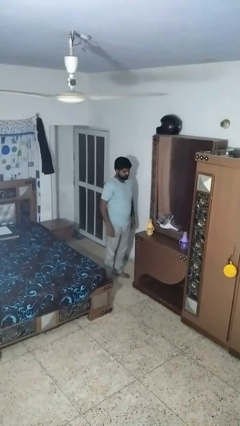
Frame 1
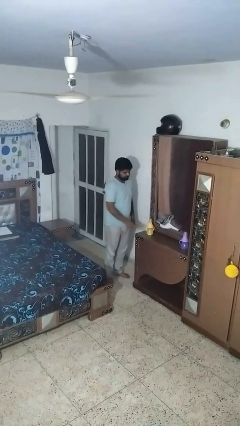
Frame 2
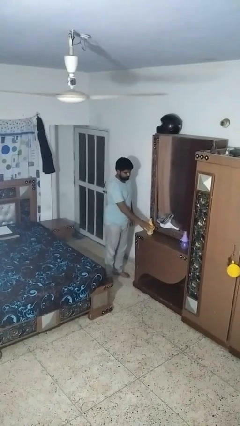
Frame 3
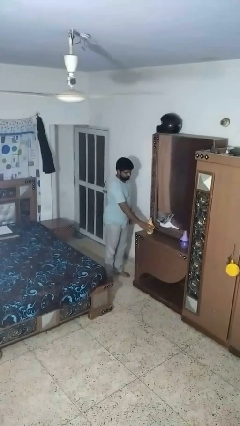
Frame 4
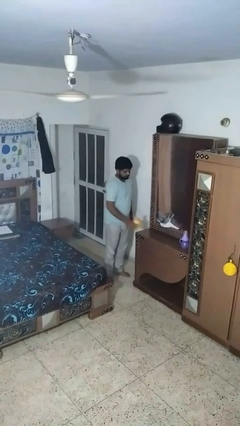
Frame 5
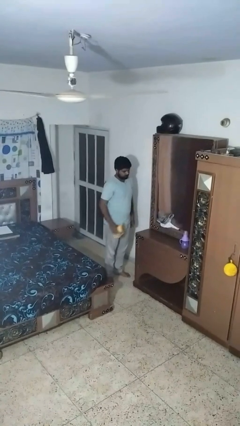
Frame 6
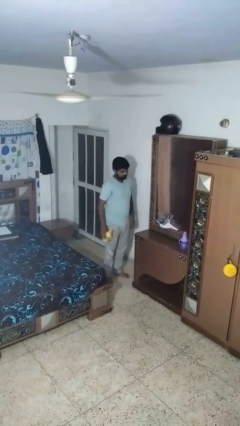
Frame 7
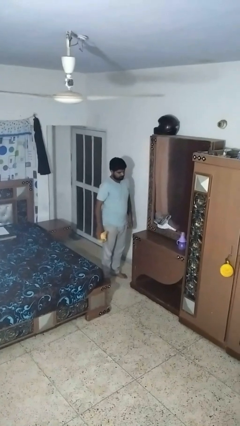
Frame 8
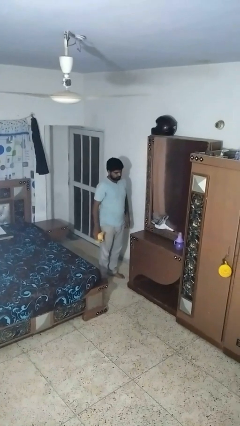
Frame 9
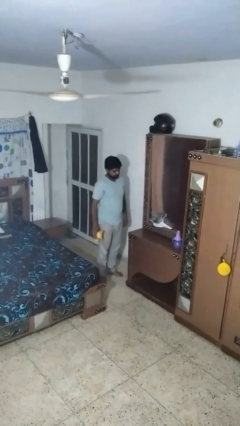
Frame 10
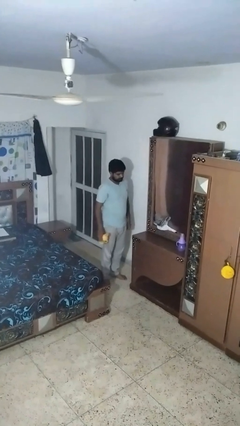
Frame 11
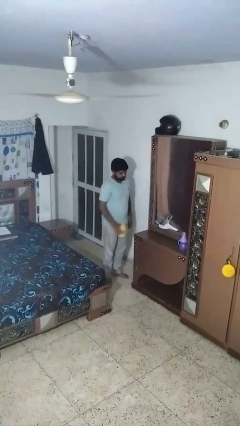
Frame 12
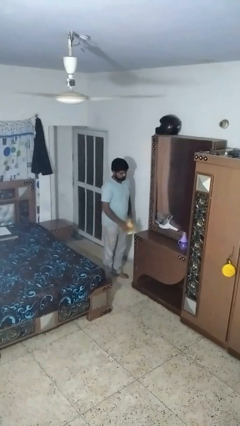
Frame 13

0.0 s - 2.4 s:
person picks up object from countertop

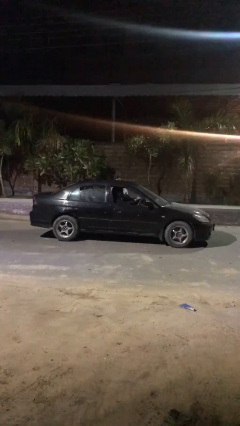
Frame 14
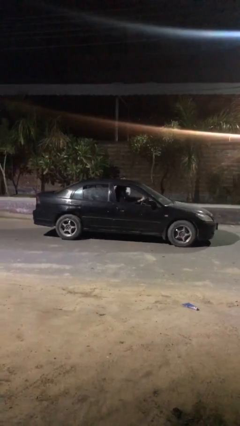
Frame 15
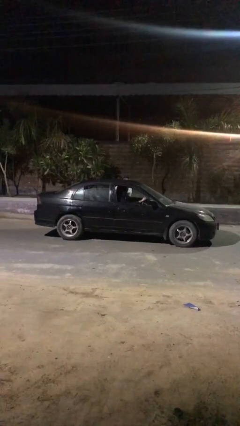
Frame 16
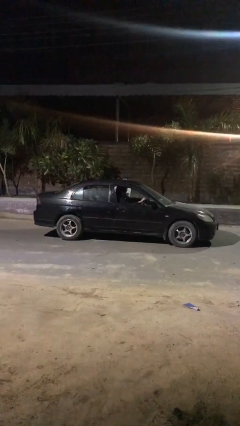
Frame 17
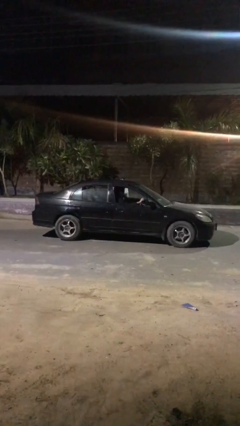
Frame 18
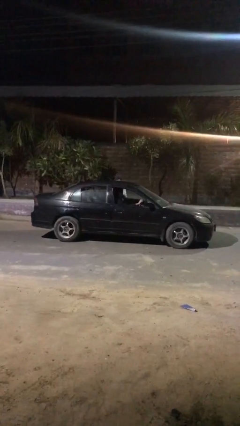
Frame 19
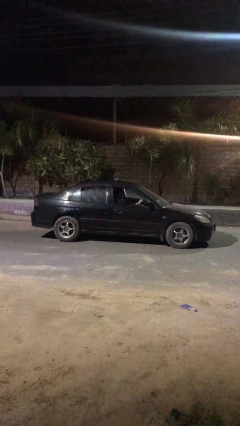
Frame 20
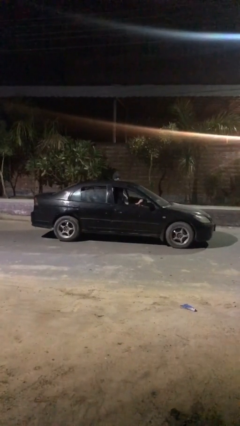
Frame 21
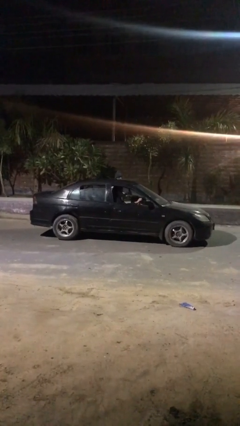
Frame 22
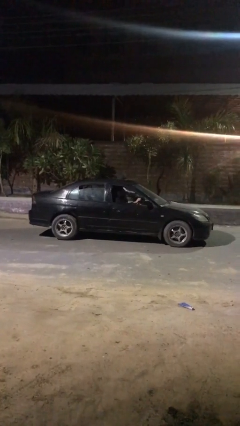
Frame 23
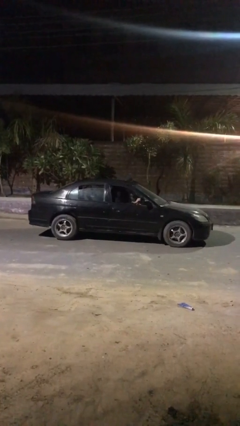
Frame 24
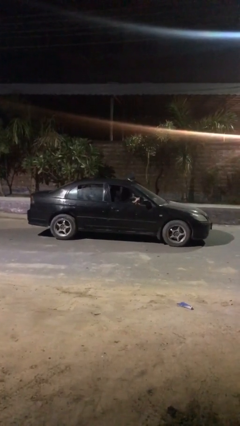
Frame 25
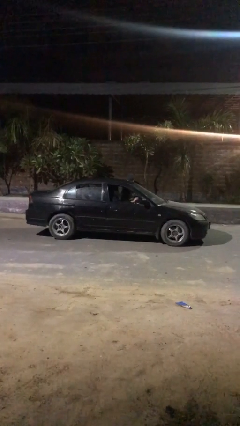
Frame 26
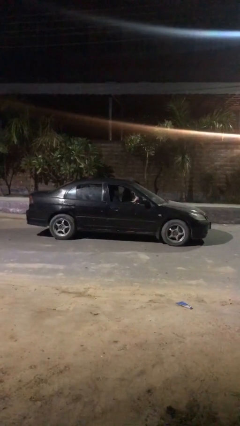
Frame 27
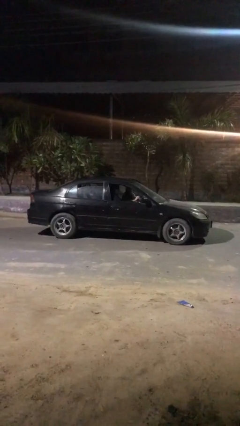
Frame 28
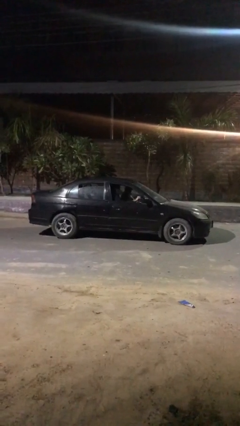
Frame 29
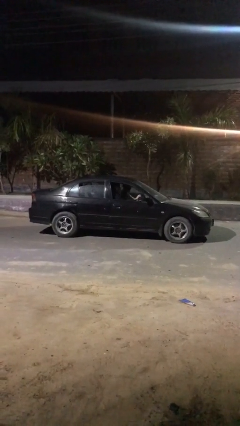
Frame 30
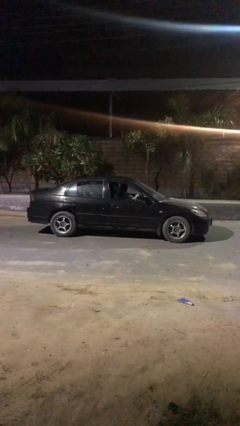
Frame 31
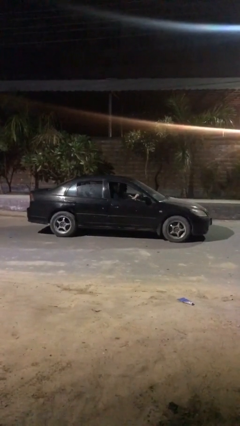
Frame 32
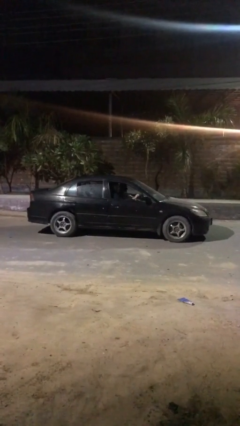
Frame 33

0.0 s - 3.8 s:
car picks up person

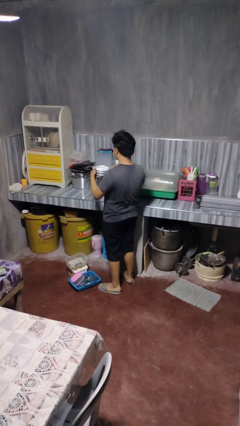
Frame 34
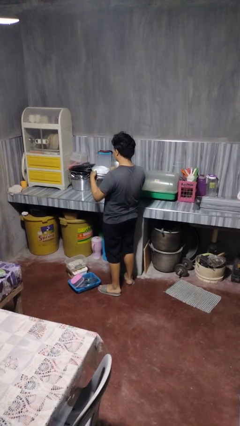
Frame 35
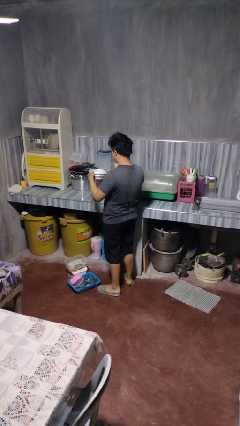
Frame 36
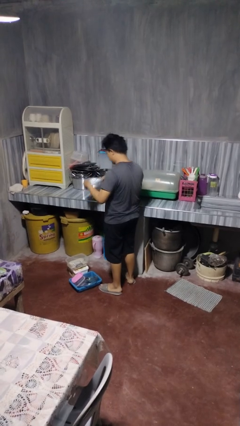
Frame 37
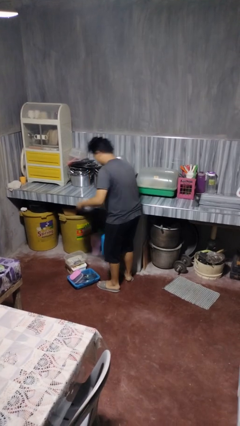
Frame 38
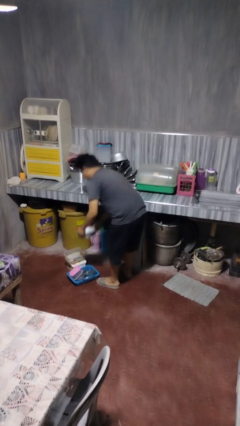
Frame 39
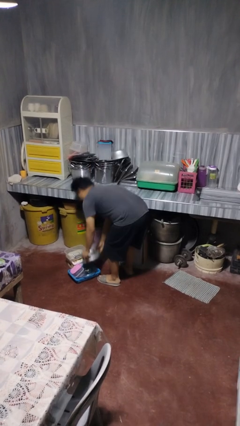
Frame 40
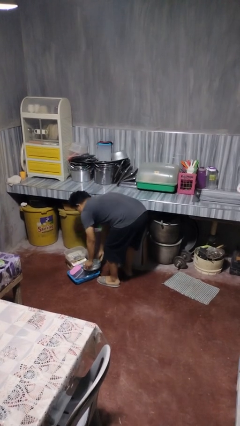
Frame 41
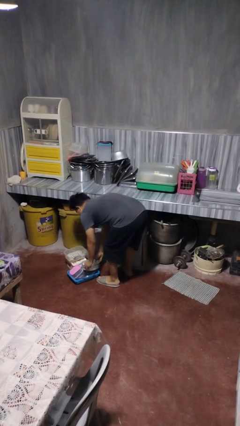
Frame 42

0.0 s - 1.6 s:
person puts down object on countertop

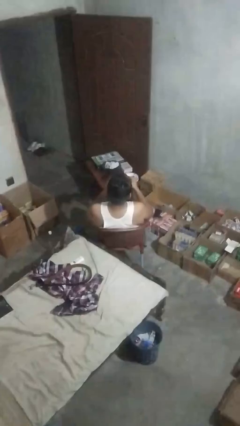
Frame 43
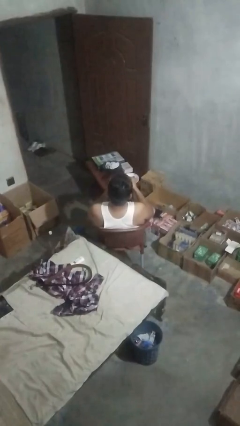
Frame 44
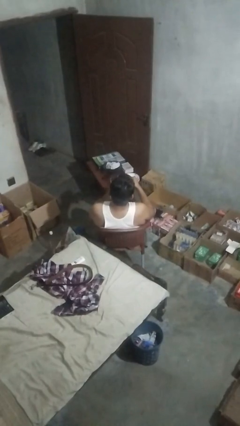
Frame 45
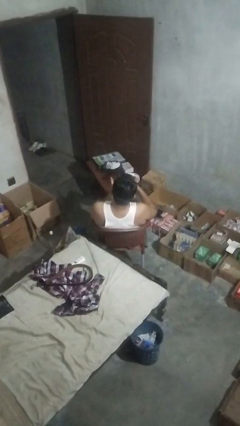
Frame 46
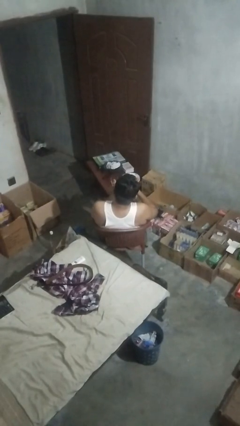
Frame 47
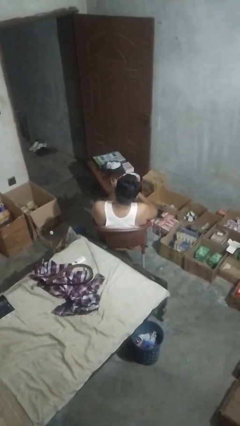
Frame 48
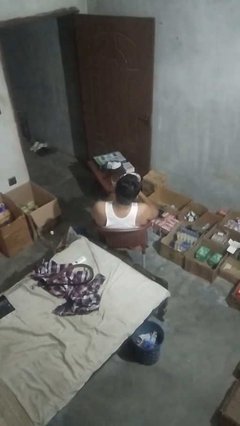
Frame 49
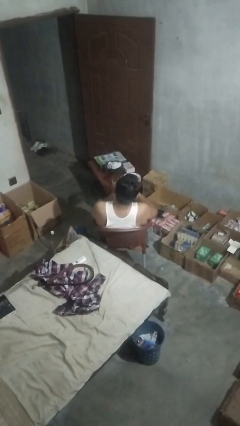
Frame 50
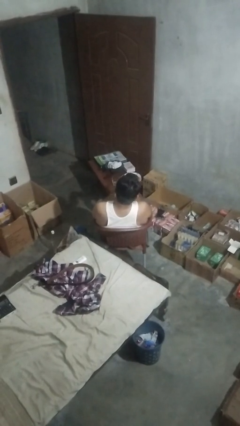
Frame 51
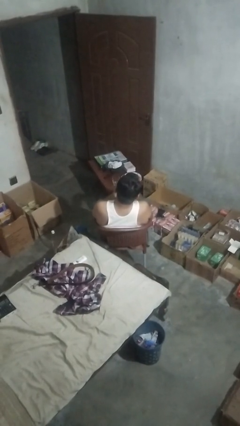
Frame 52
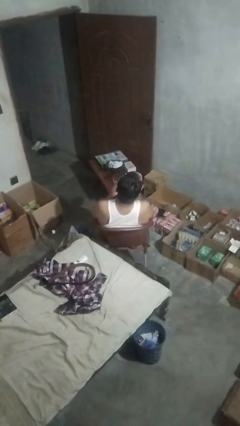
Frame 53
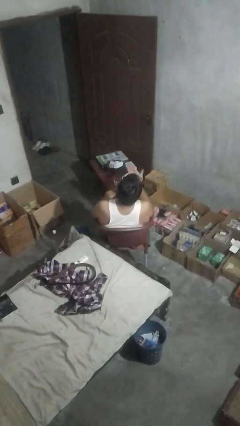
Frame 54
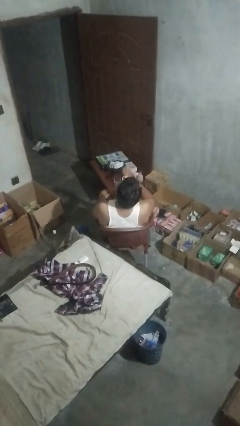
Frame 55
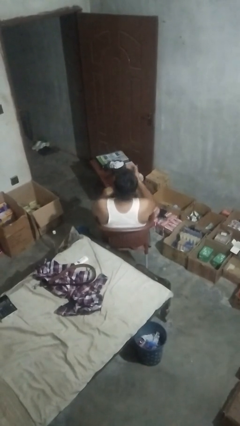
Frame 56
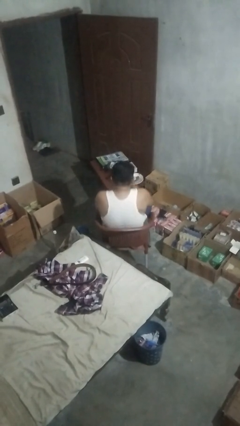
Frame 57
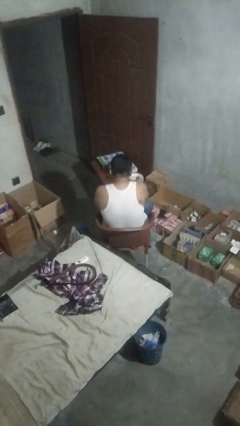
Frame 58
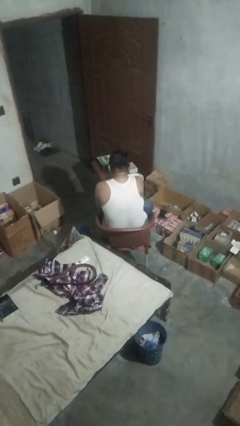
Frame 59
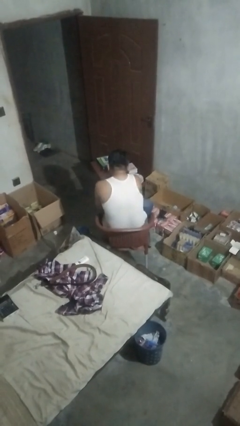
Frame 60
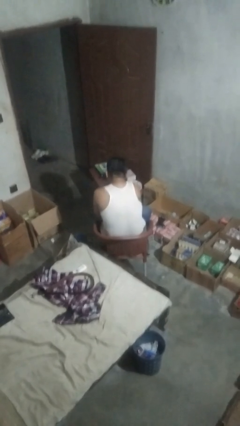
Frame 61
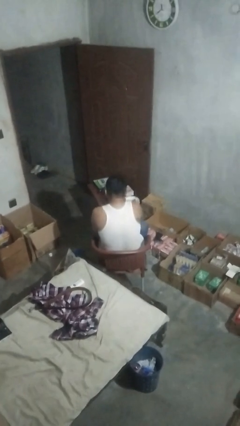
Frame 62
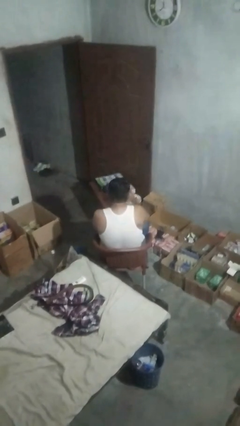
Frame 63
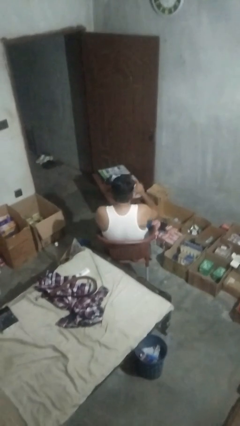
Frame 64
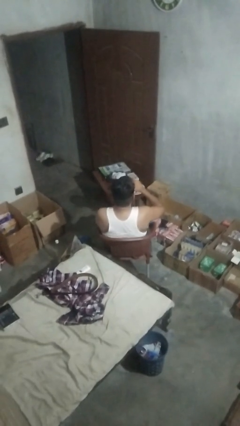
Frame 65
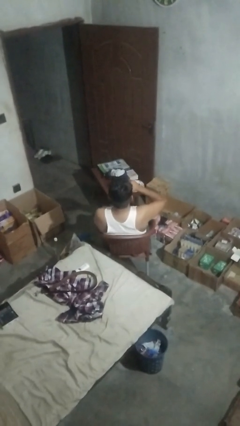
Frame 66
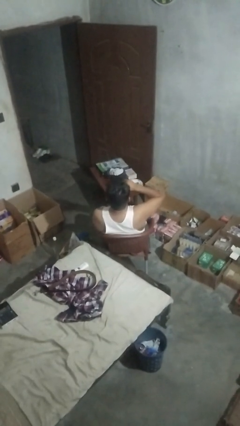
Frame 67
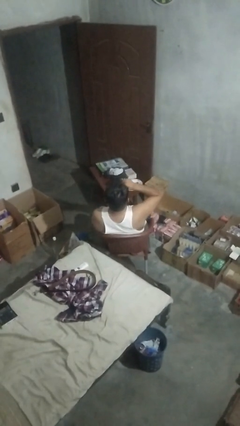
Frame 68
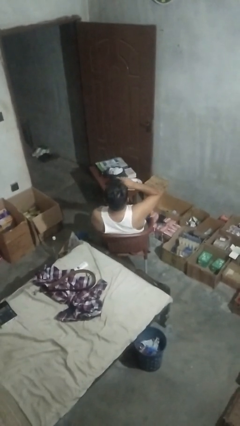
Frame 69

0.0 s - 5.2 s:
person takes medicine pills

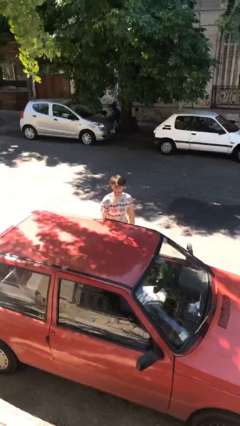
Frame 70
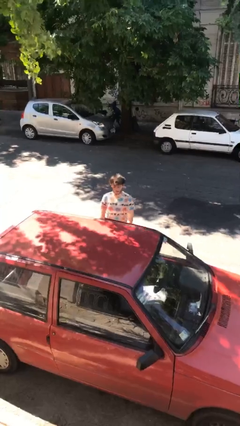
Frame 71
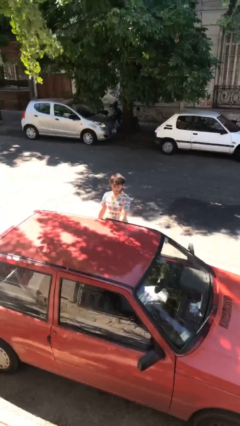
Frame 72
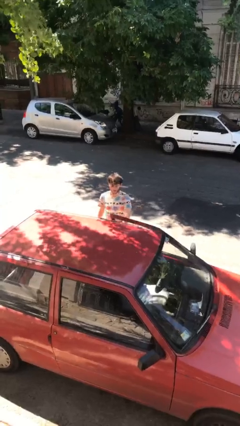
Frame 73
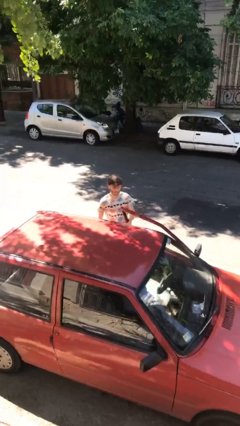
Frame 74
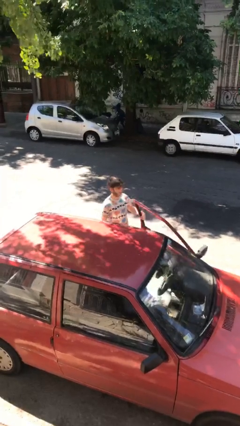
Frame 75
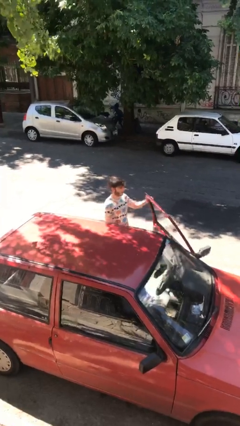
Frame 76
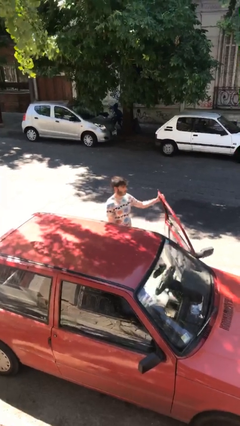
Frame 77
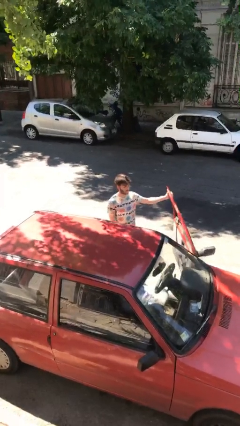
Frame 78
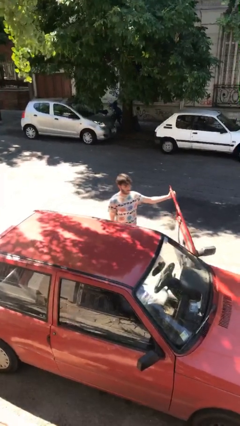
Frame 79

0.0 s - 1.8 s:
person opens car door

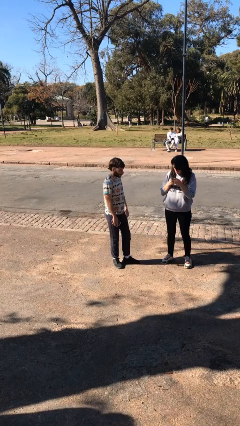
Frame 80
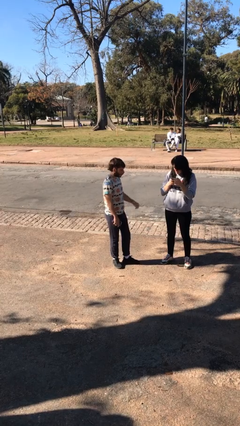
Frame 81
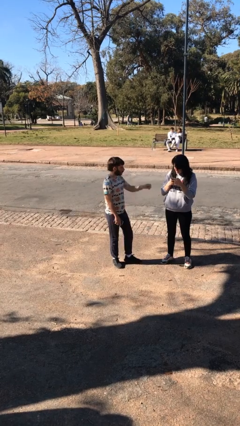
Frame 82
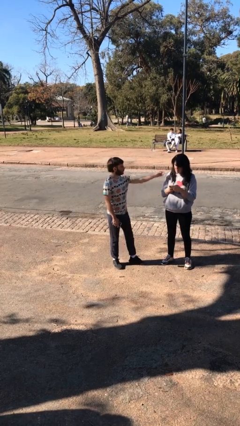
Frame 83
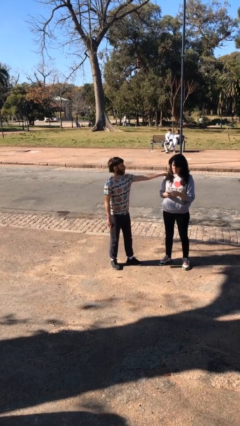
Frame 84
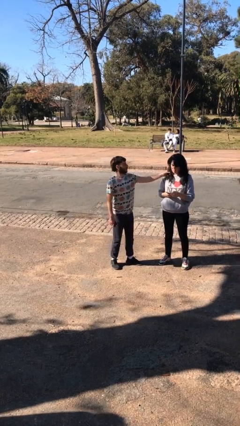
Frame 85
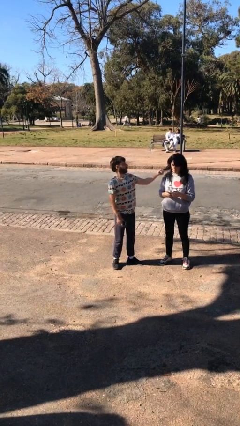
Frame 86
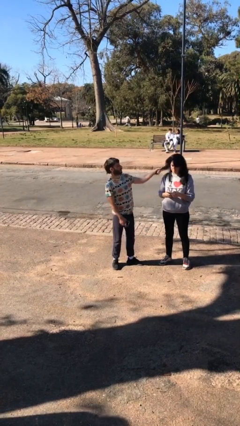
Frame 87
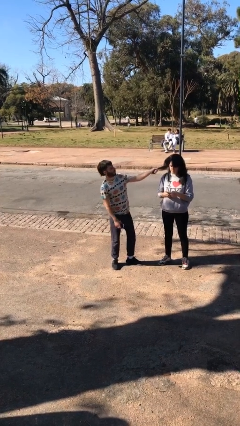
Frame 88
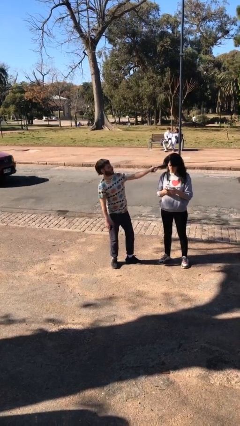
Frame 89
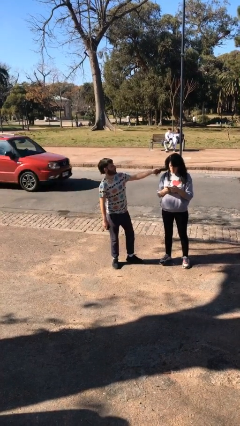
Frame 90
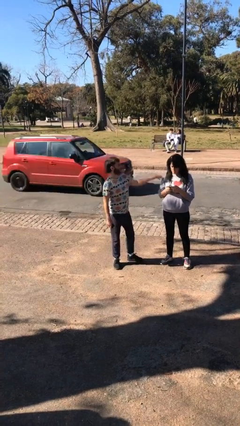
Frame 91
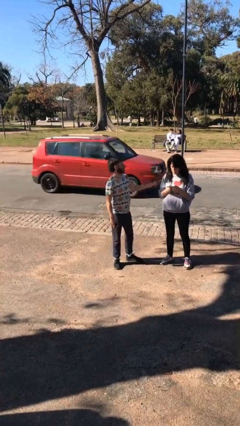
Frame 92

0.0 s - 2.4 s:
person grabs person by hair
